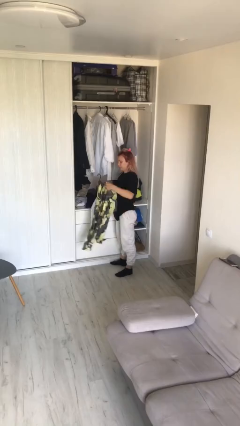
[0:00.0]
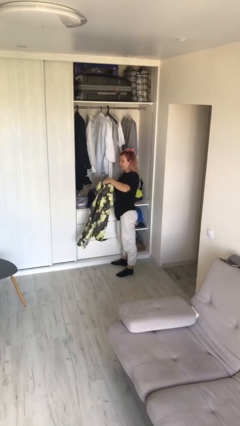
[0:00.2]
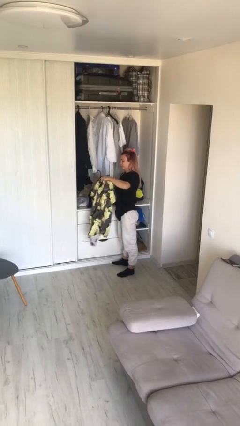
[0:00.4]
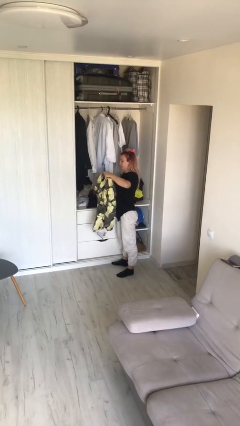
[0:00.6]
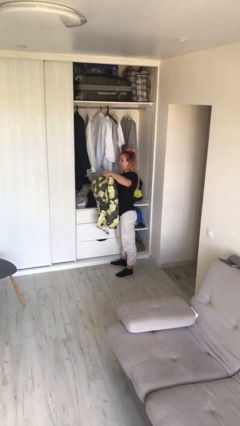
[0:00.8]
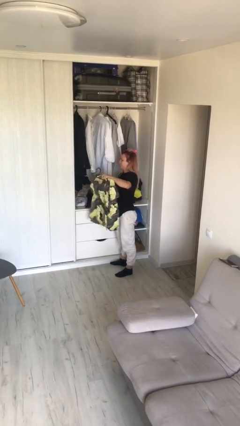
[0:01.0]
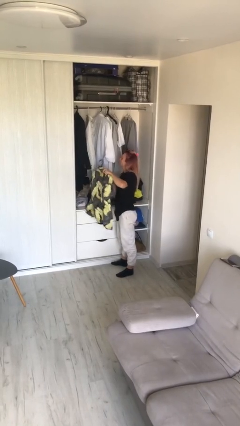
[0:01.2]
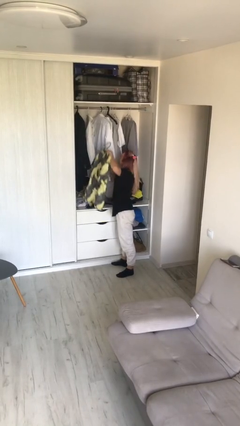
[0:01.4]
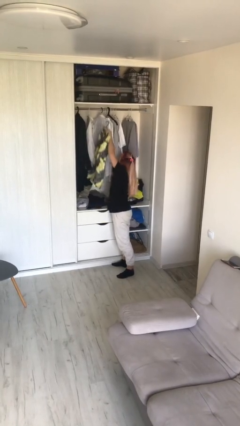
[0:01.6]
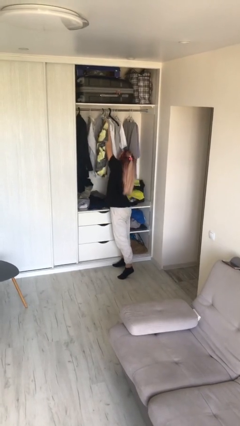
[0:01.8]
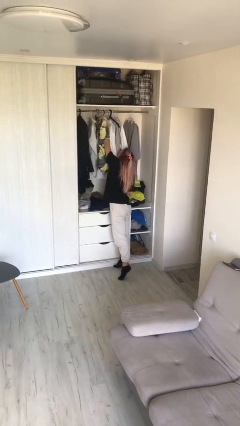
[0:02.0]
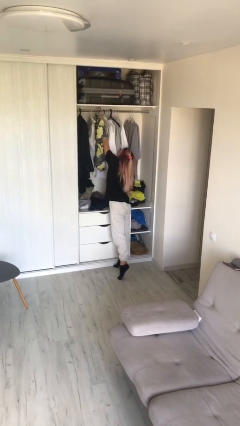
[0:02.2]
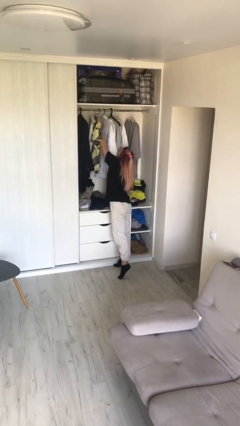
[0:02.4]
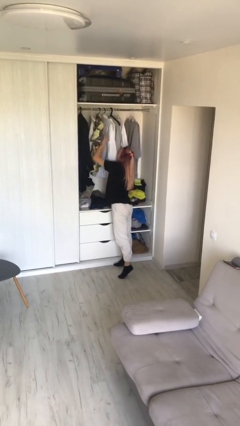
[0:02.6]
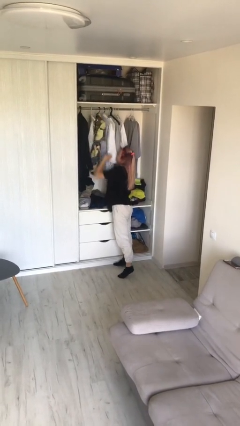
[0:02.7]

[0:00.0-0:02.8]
person puts clothes into closet

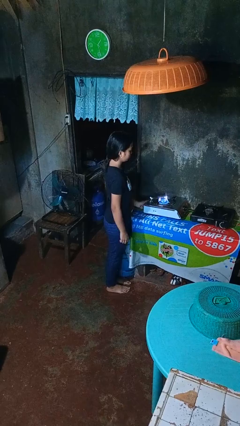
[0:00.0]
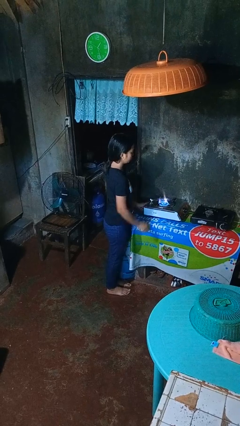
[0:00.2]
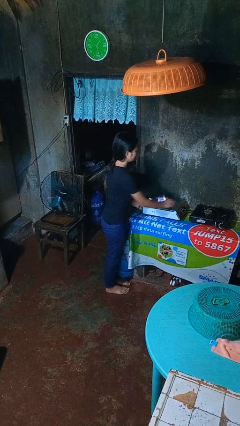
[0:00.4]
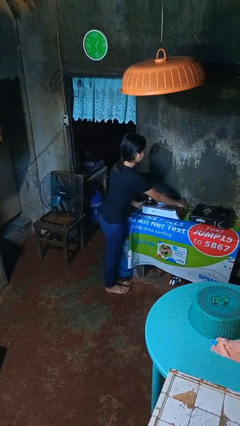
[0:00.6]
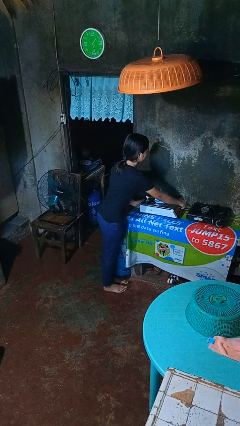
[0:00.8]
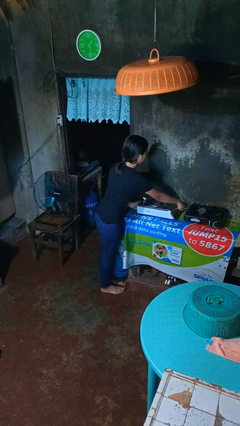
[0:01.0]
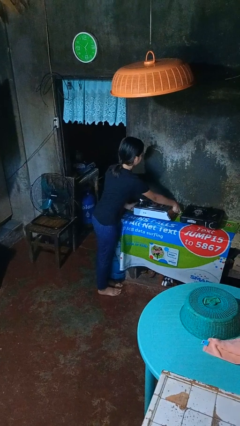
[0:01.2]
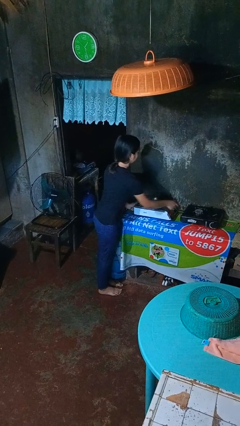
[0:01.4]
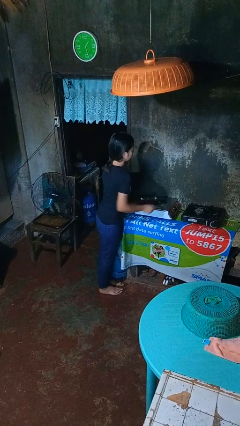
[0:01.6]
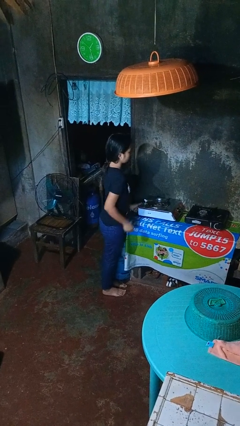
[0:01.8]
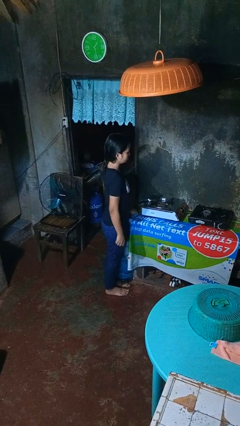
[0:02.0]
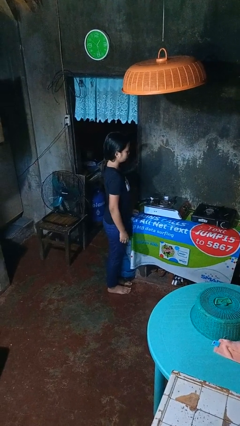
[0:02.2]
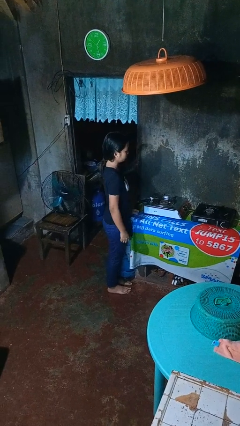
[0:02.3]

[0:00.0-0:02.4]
person turns off stovetop

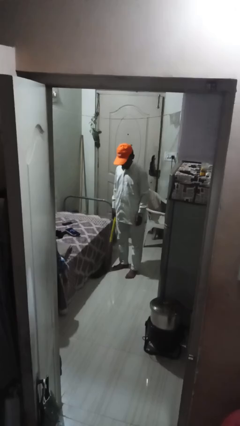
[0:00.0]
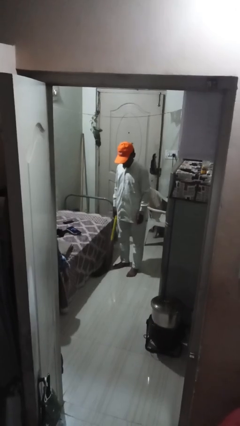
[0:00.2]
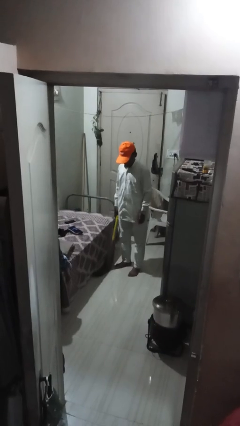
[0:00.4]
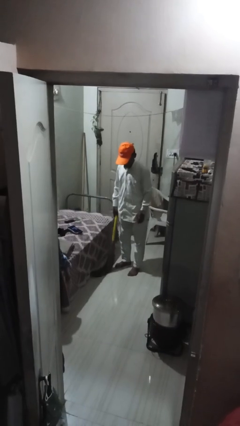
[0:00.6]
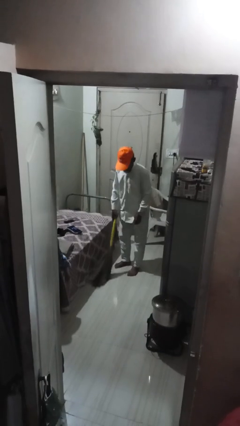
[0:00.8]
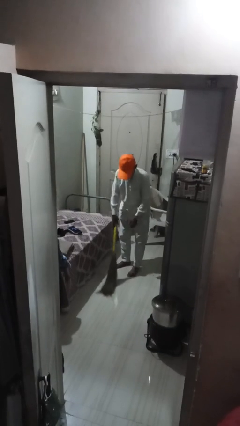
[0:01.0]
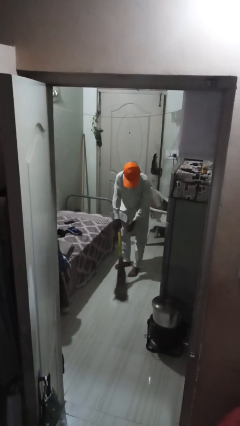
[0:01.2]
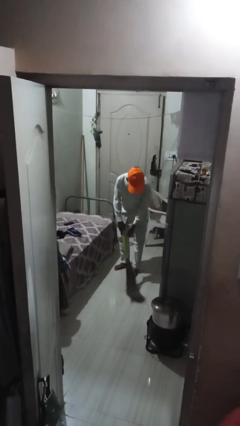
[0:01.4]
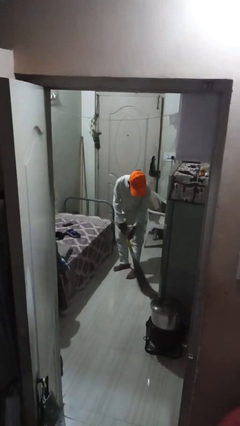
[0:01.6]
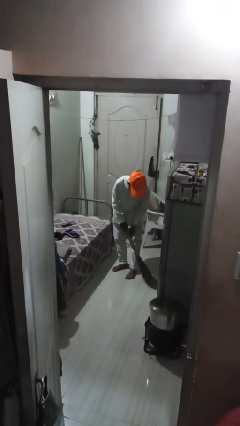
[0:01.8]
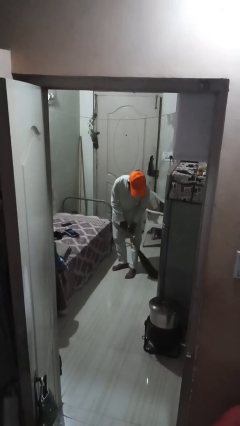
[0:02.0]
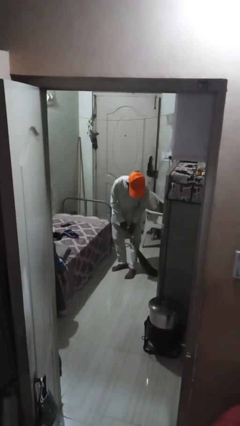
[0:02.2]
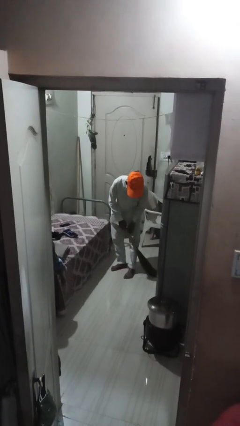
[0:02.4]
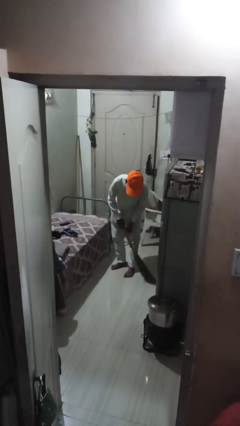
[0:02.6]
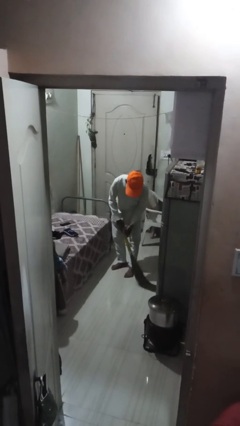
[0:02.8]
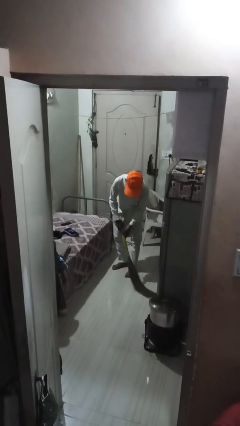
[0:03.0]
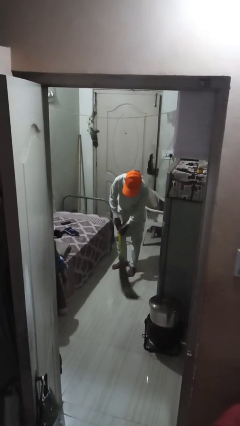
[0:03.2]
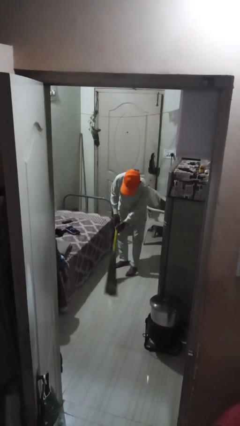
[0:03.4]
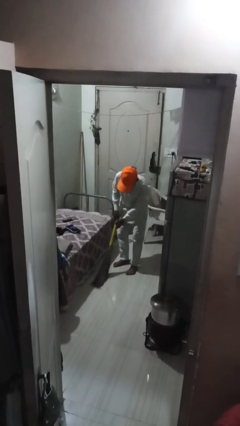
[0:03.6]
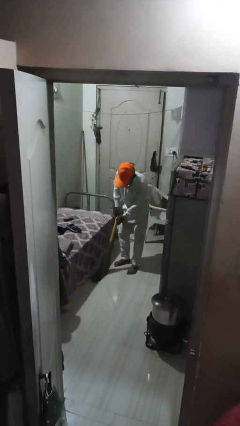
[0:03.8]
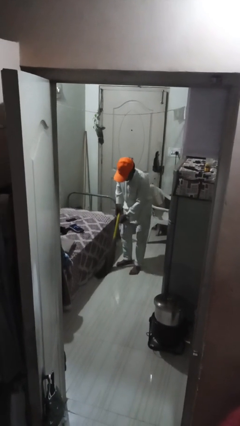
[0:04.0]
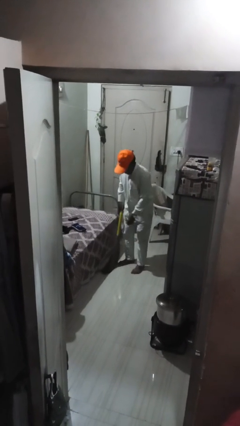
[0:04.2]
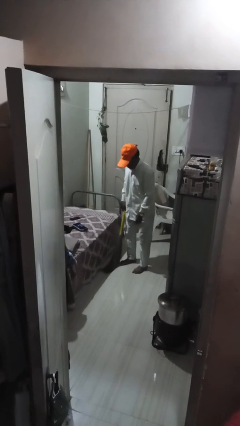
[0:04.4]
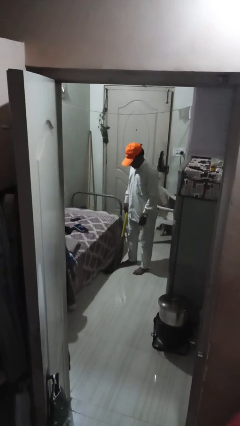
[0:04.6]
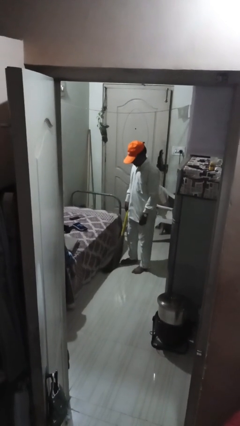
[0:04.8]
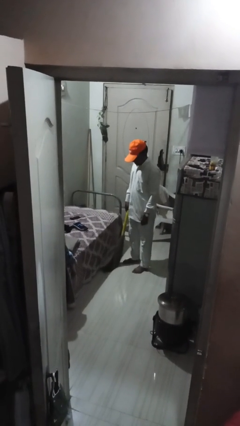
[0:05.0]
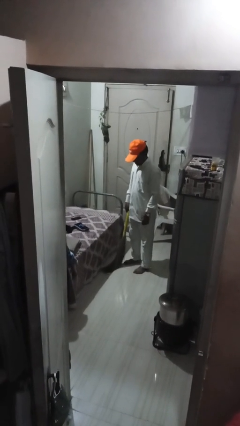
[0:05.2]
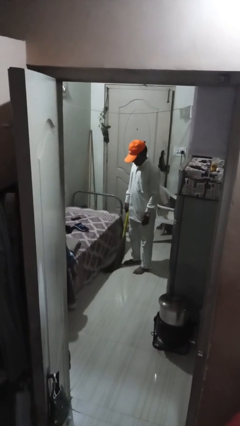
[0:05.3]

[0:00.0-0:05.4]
person sweeps floor

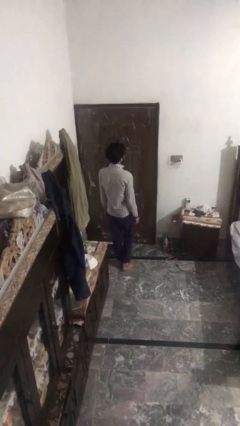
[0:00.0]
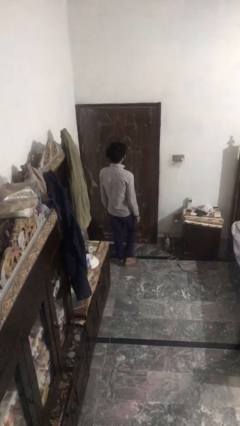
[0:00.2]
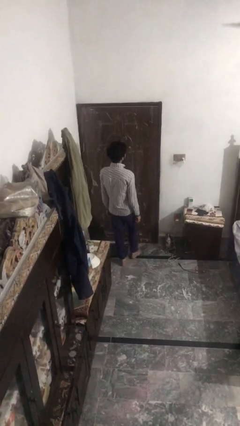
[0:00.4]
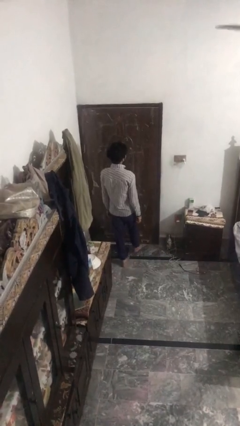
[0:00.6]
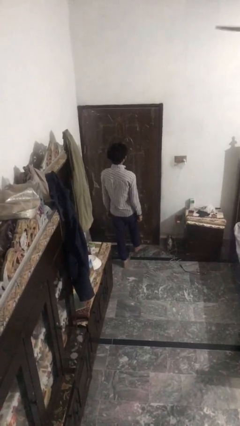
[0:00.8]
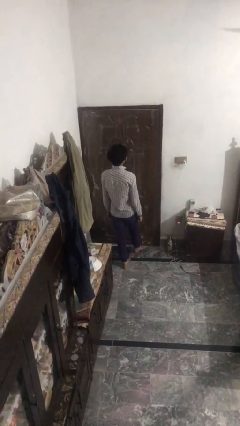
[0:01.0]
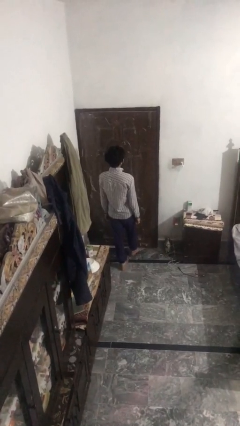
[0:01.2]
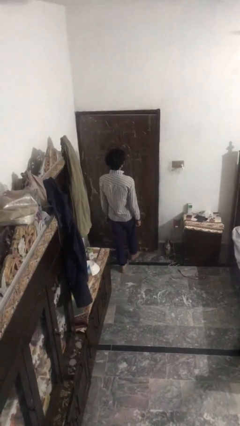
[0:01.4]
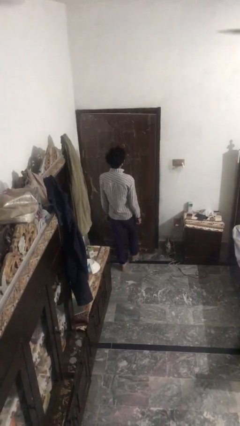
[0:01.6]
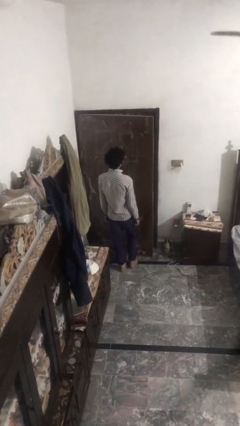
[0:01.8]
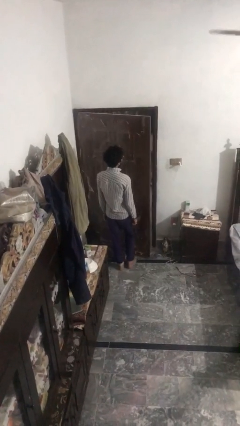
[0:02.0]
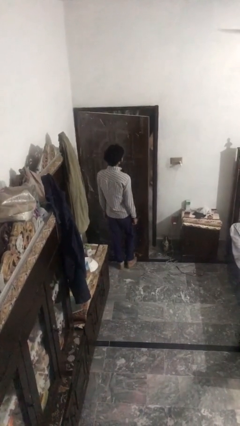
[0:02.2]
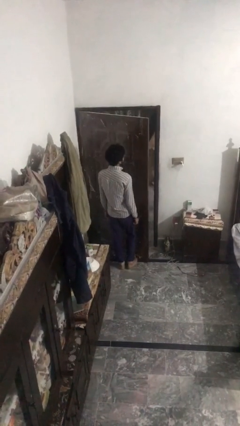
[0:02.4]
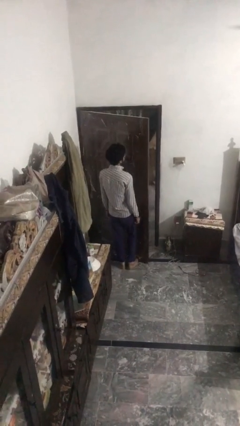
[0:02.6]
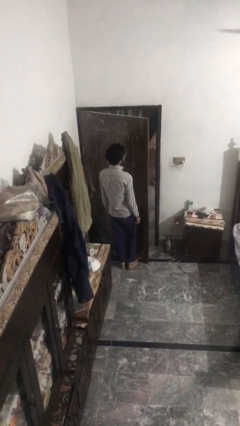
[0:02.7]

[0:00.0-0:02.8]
person opens facility door

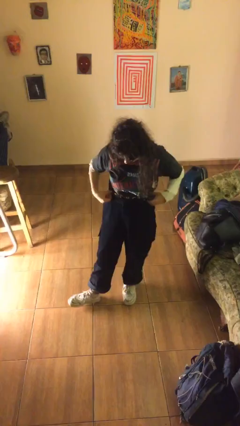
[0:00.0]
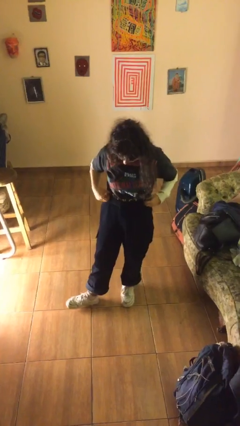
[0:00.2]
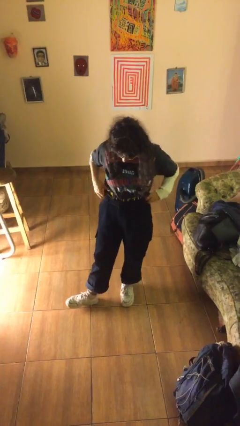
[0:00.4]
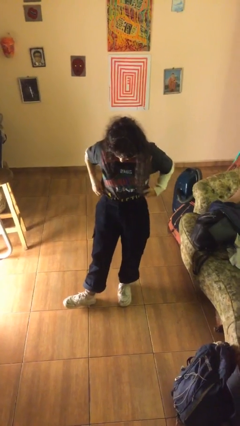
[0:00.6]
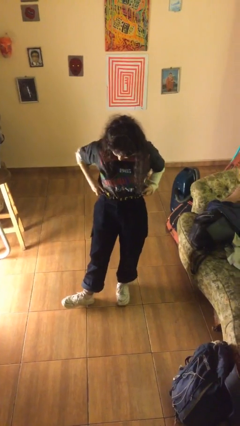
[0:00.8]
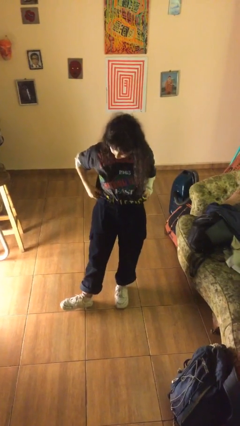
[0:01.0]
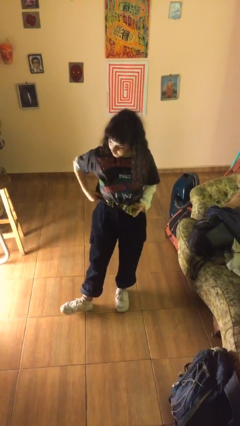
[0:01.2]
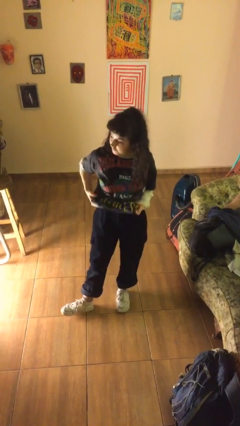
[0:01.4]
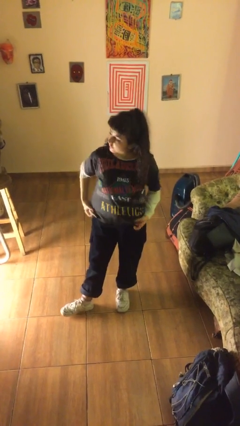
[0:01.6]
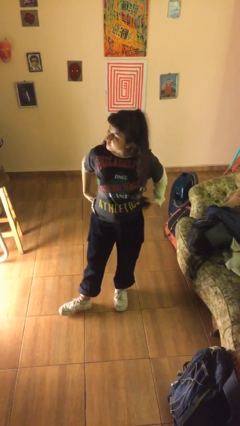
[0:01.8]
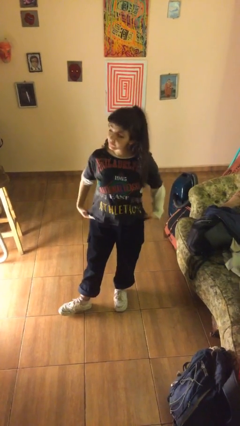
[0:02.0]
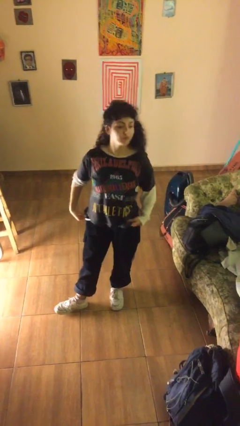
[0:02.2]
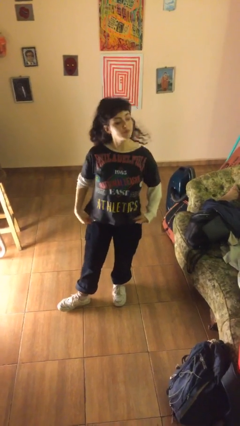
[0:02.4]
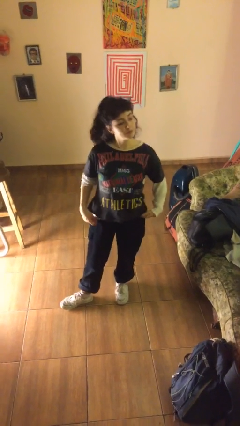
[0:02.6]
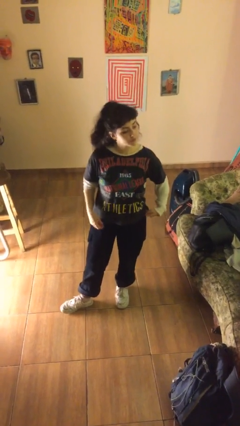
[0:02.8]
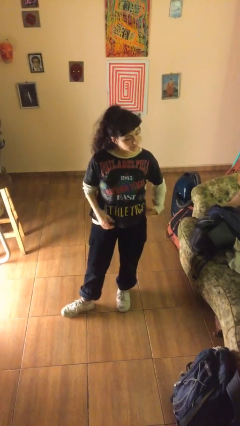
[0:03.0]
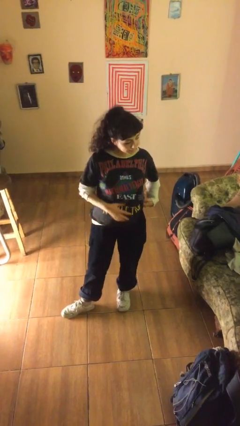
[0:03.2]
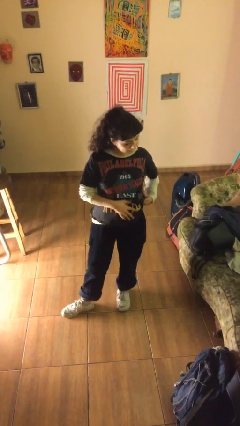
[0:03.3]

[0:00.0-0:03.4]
person untucks shirt

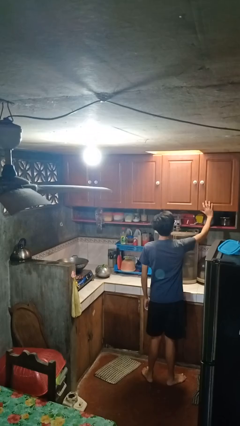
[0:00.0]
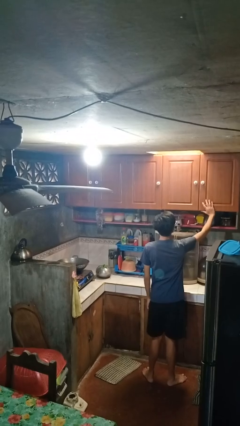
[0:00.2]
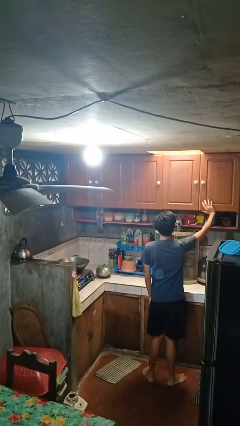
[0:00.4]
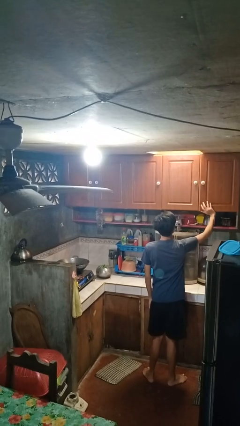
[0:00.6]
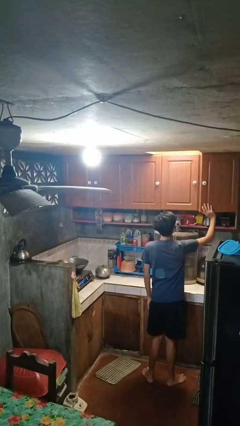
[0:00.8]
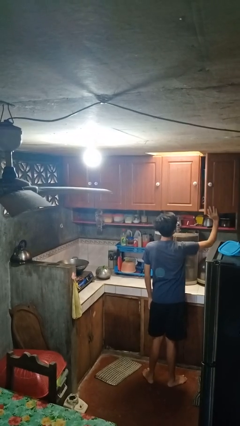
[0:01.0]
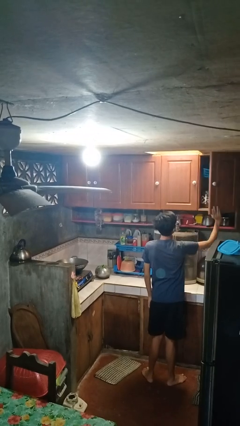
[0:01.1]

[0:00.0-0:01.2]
person opens cabinet
